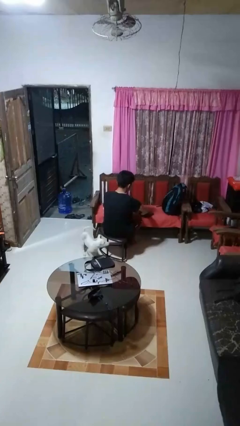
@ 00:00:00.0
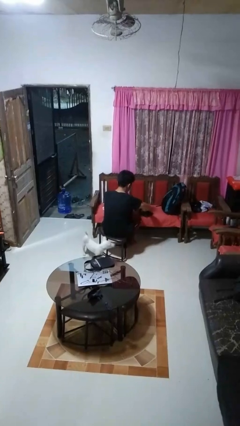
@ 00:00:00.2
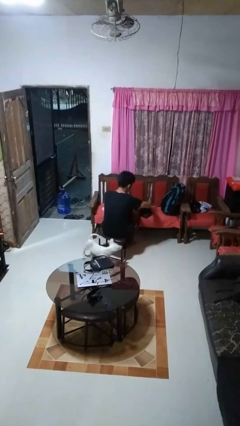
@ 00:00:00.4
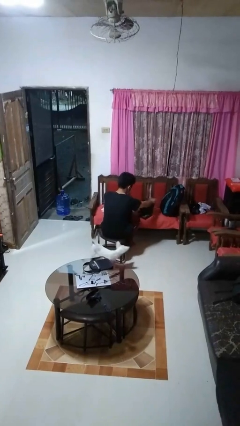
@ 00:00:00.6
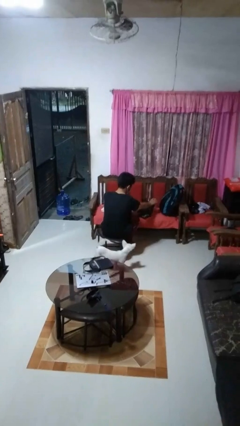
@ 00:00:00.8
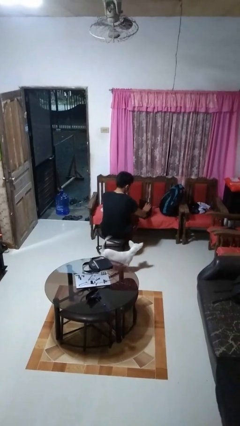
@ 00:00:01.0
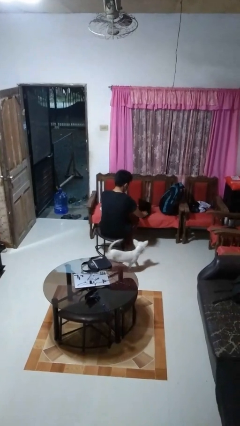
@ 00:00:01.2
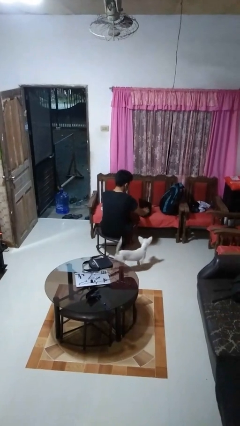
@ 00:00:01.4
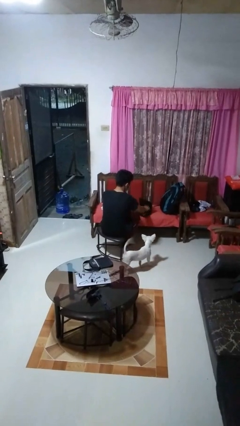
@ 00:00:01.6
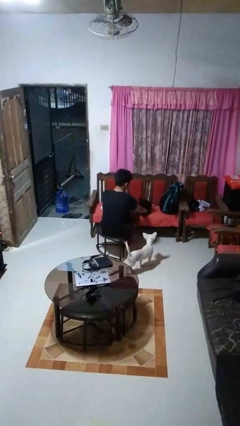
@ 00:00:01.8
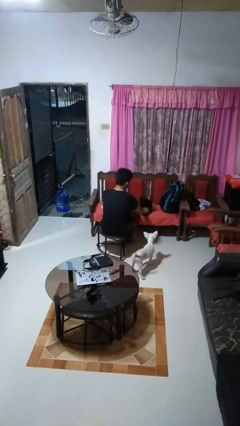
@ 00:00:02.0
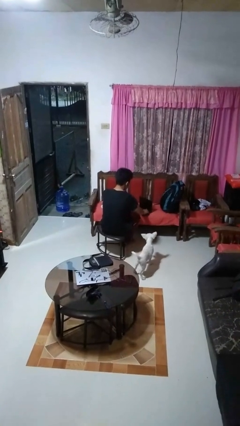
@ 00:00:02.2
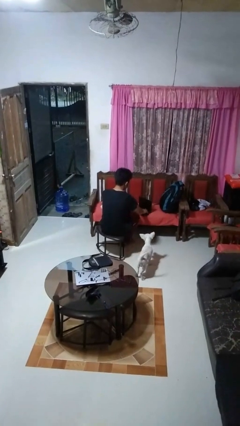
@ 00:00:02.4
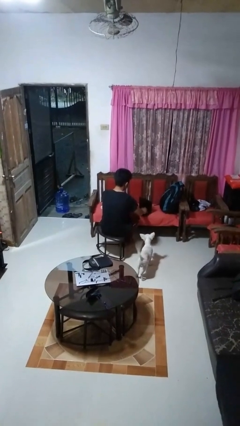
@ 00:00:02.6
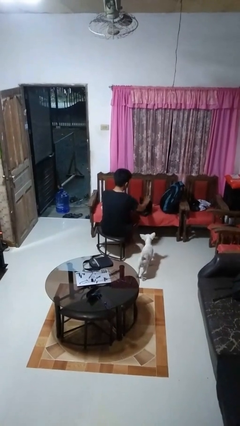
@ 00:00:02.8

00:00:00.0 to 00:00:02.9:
person opens laptop

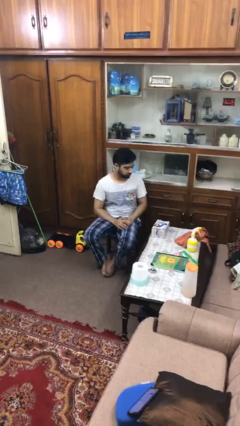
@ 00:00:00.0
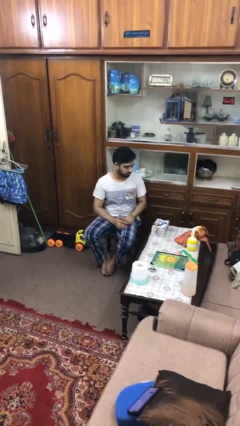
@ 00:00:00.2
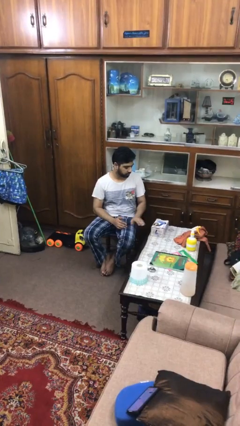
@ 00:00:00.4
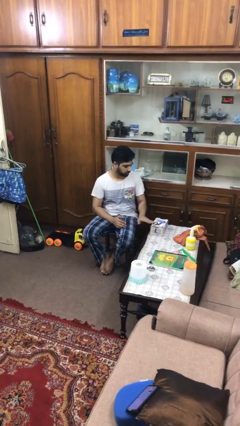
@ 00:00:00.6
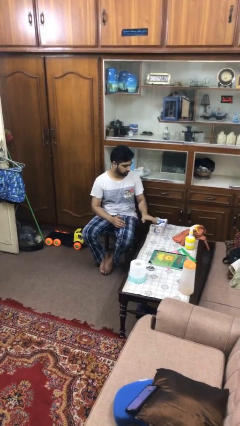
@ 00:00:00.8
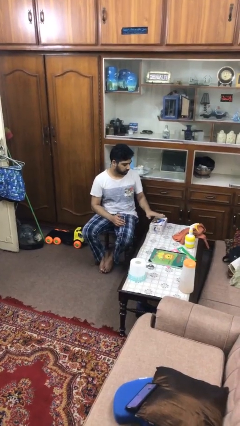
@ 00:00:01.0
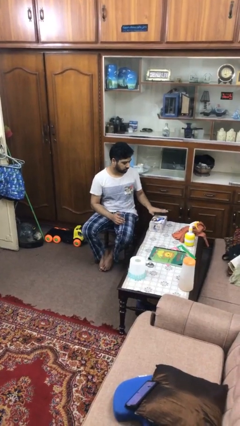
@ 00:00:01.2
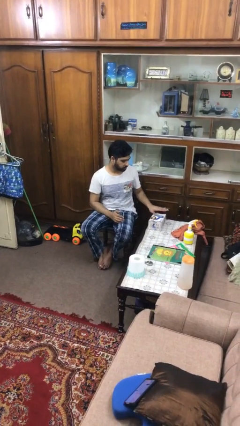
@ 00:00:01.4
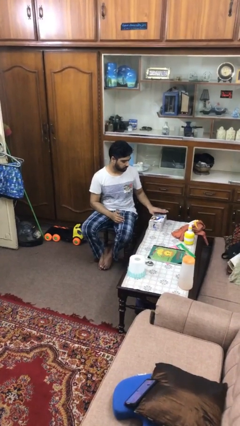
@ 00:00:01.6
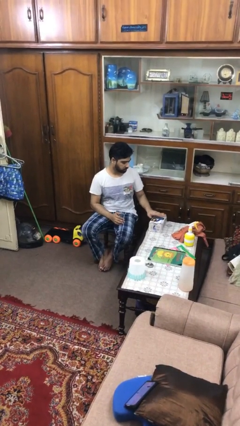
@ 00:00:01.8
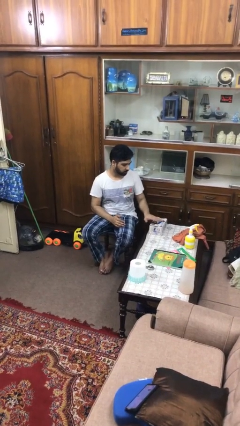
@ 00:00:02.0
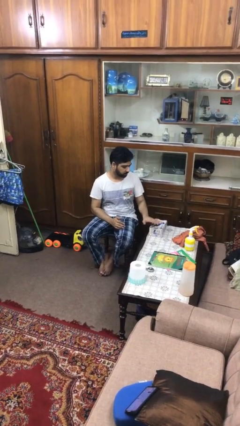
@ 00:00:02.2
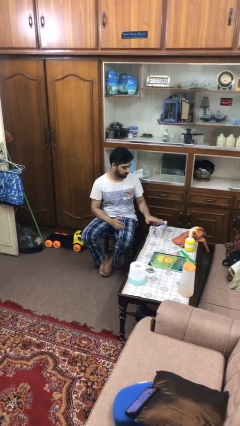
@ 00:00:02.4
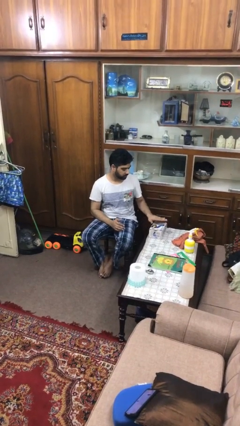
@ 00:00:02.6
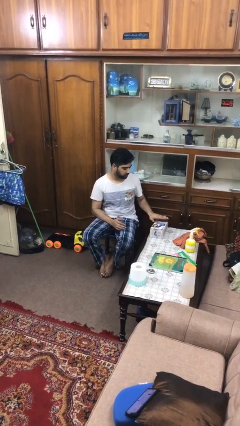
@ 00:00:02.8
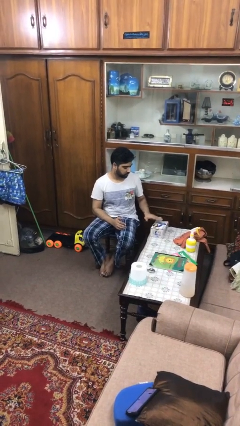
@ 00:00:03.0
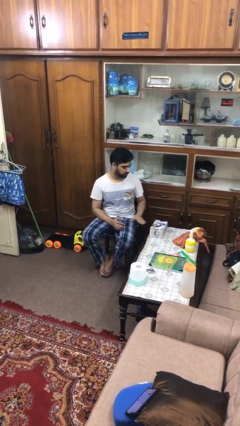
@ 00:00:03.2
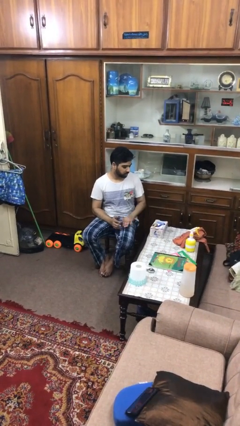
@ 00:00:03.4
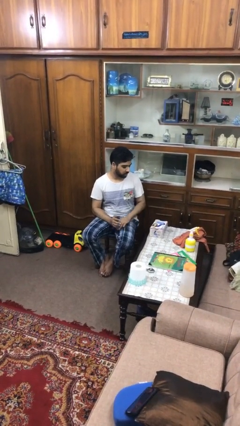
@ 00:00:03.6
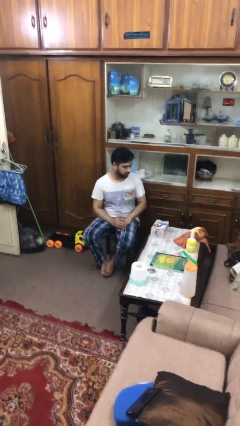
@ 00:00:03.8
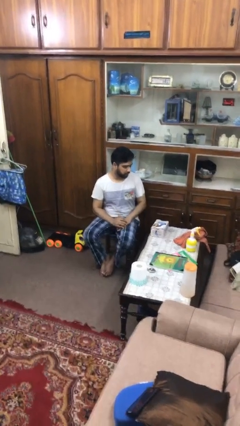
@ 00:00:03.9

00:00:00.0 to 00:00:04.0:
person waves hand over object

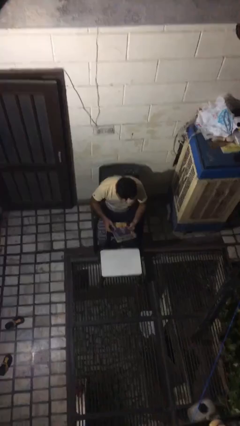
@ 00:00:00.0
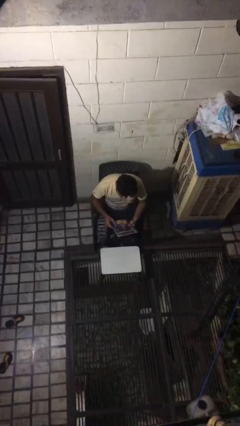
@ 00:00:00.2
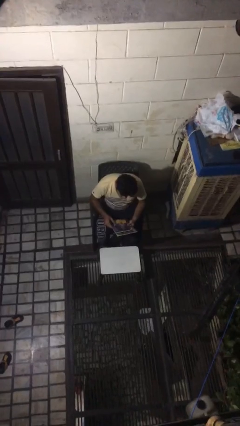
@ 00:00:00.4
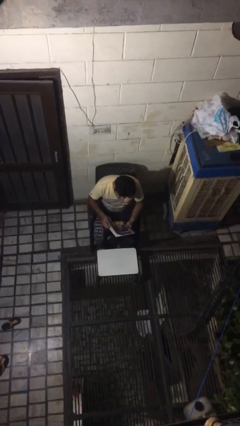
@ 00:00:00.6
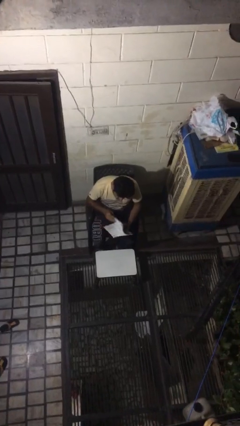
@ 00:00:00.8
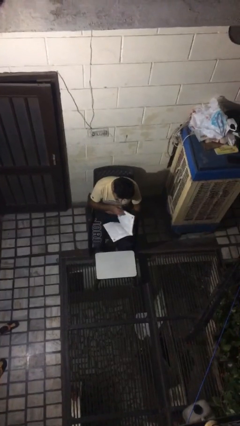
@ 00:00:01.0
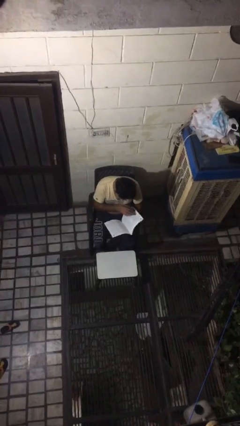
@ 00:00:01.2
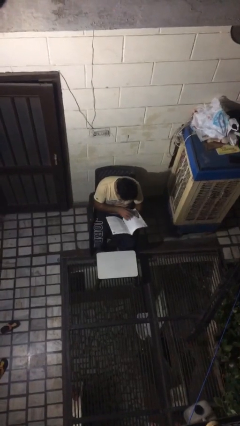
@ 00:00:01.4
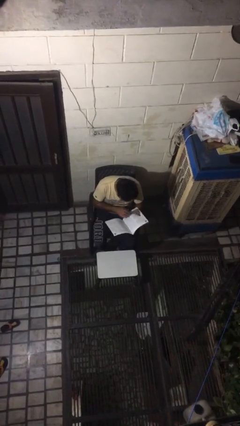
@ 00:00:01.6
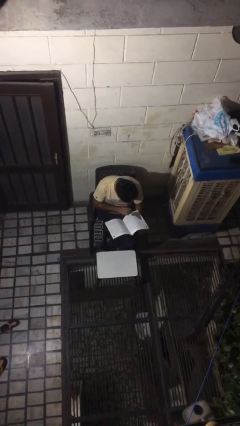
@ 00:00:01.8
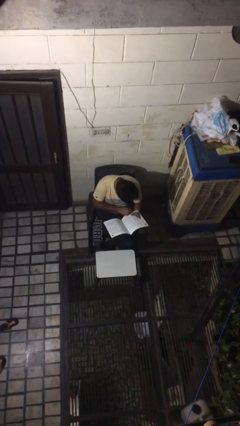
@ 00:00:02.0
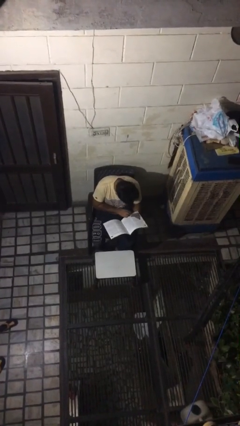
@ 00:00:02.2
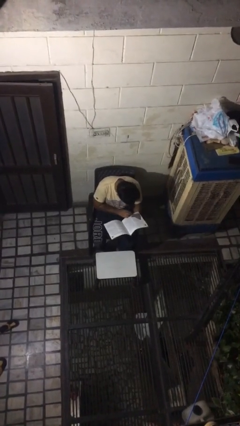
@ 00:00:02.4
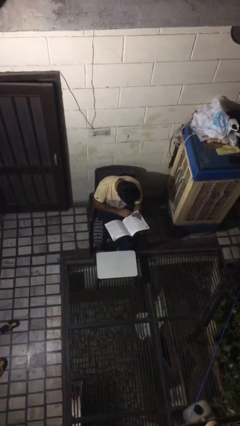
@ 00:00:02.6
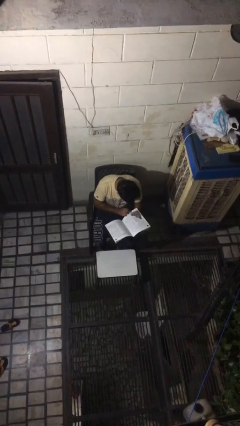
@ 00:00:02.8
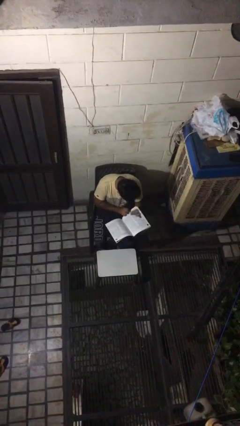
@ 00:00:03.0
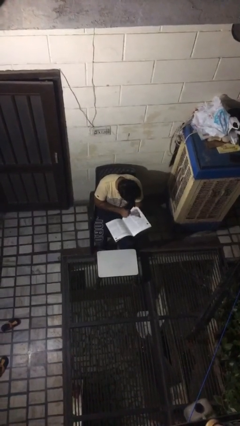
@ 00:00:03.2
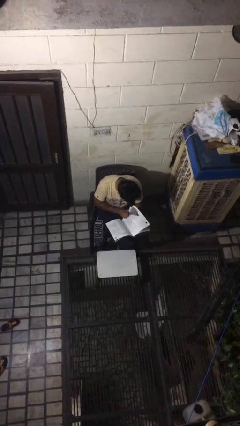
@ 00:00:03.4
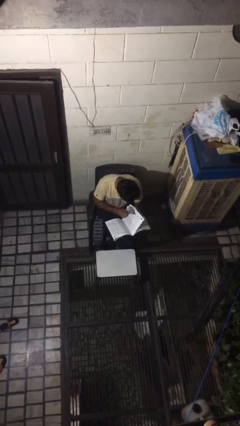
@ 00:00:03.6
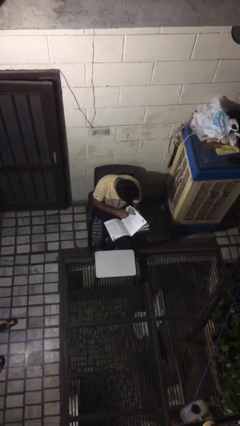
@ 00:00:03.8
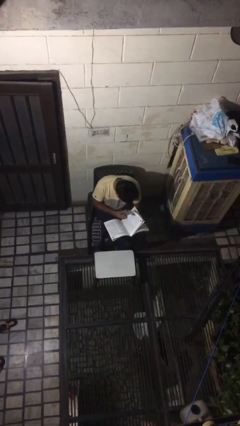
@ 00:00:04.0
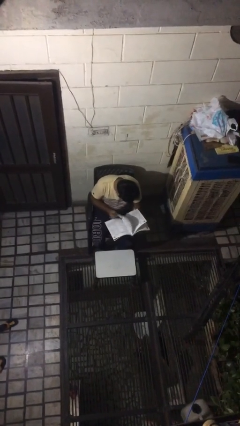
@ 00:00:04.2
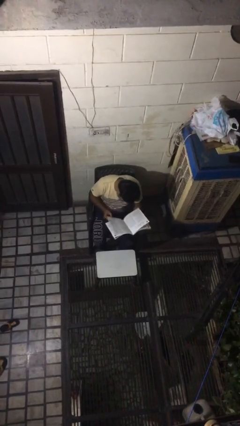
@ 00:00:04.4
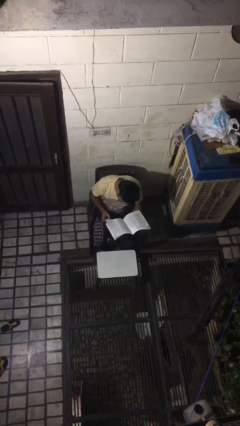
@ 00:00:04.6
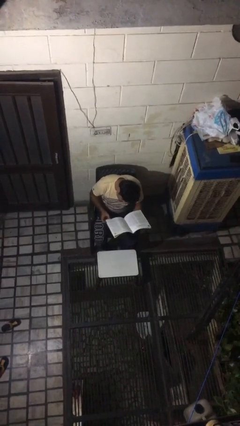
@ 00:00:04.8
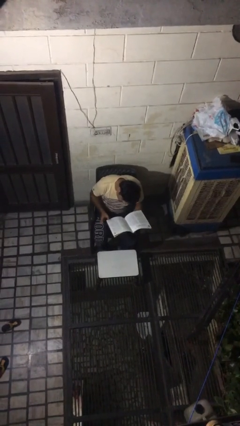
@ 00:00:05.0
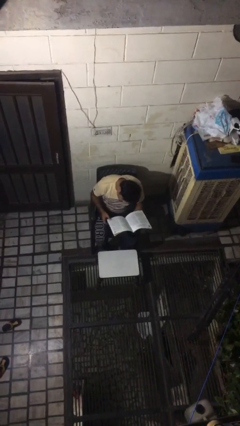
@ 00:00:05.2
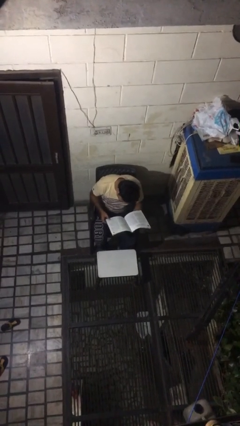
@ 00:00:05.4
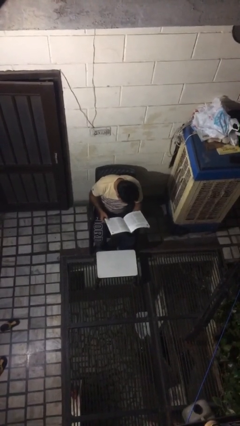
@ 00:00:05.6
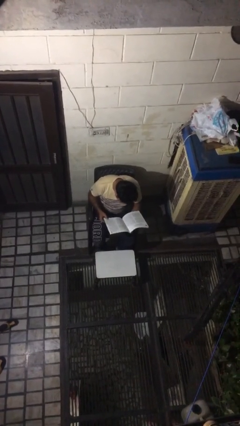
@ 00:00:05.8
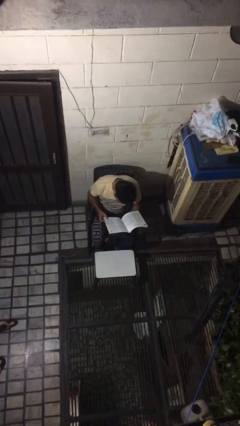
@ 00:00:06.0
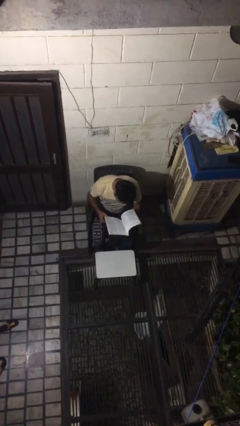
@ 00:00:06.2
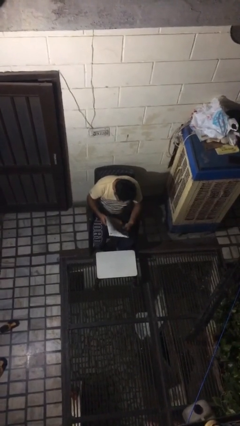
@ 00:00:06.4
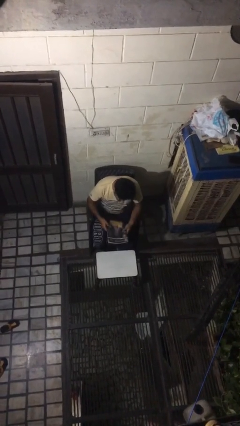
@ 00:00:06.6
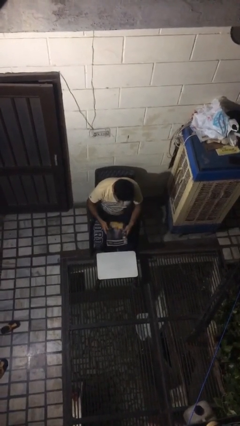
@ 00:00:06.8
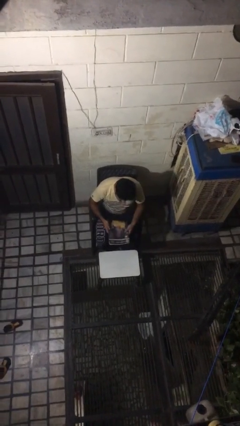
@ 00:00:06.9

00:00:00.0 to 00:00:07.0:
person reads magazine

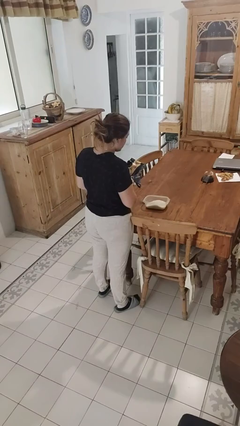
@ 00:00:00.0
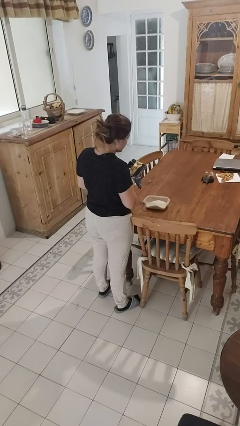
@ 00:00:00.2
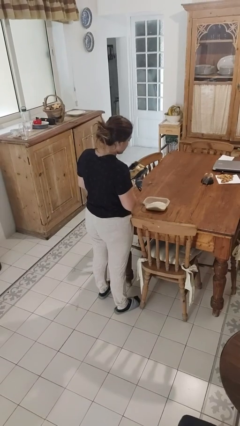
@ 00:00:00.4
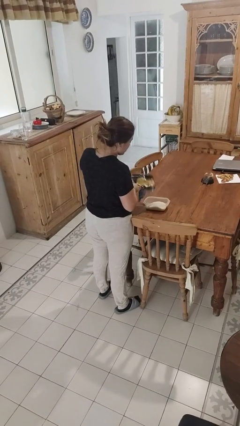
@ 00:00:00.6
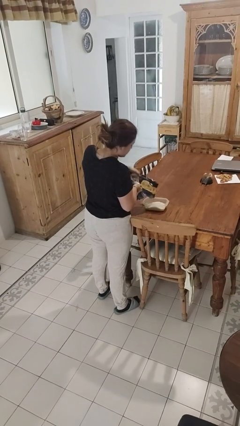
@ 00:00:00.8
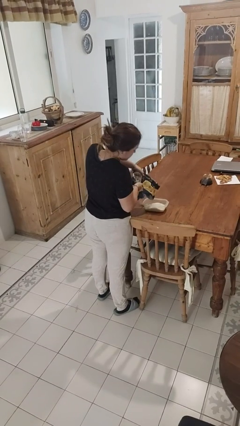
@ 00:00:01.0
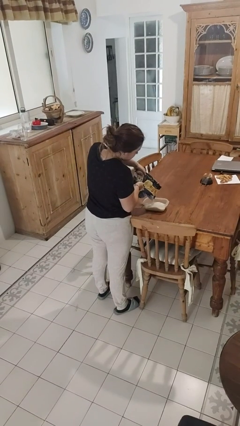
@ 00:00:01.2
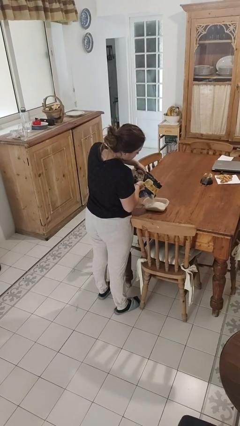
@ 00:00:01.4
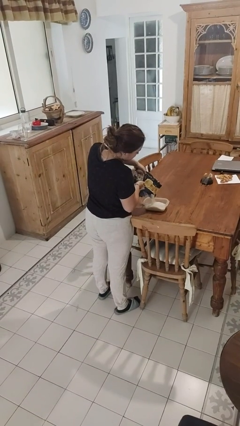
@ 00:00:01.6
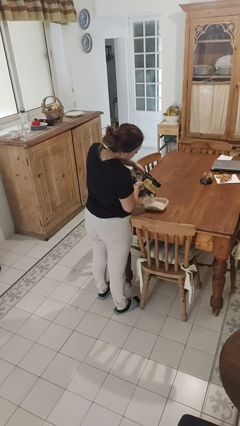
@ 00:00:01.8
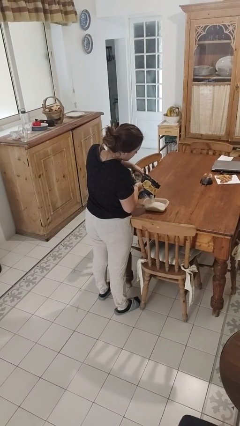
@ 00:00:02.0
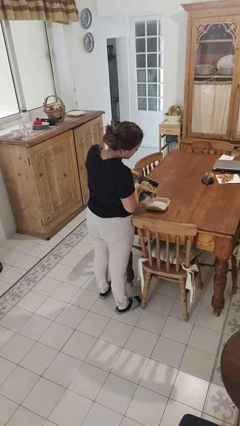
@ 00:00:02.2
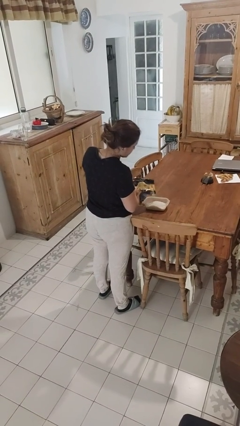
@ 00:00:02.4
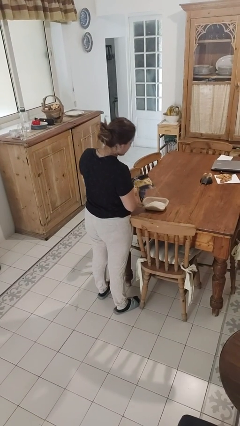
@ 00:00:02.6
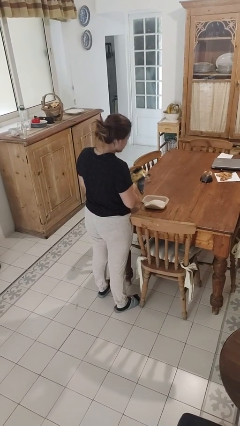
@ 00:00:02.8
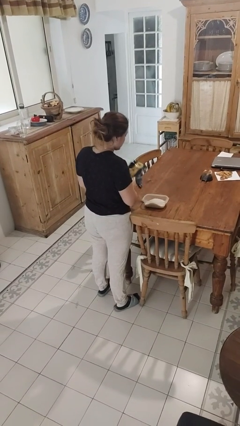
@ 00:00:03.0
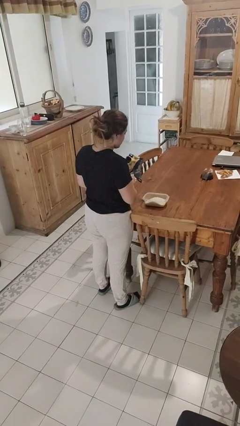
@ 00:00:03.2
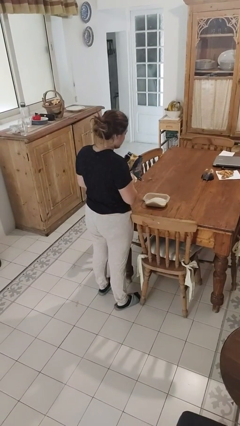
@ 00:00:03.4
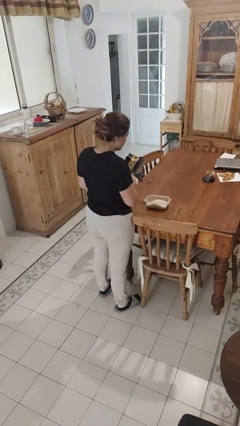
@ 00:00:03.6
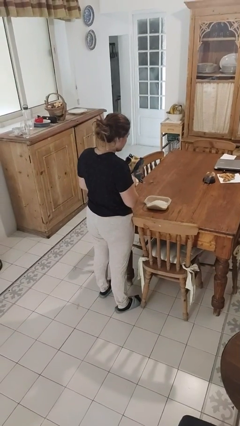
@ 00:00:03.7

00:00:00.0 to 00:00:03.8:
person pours into bowl
